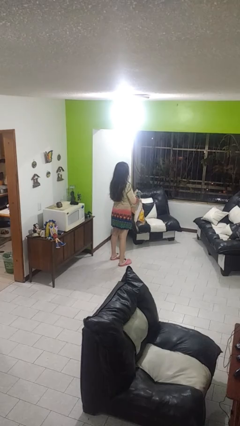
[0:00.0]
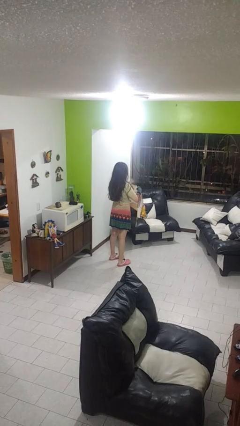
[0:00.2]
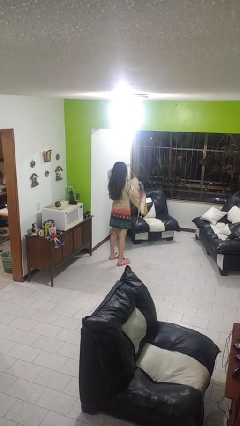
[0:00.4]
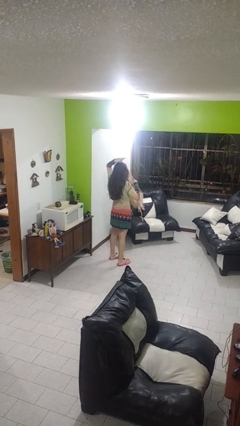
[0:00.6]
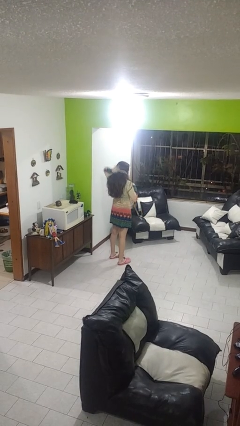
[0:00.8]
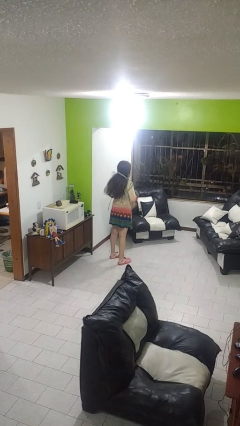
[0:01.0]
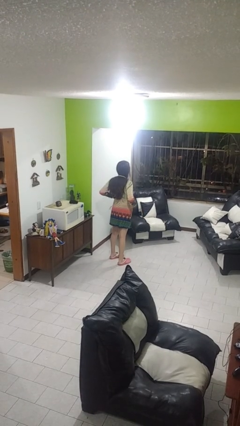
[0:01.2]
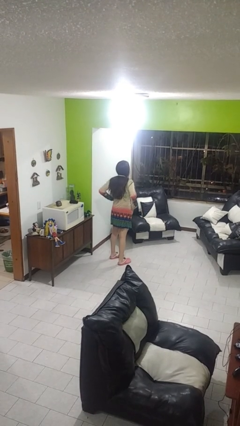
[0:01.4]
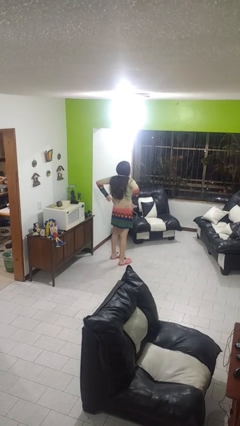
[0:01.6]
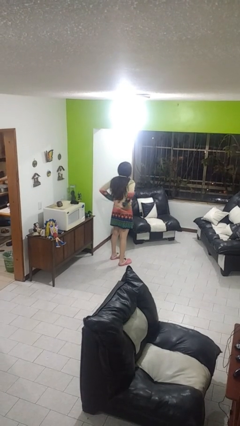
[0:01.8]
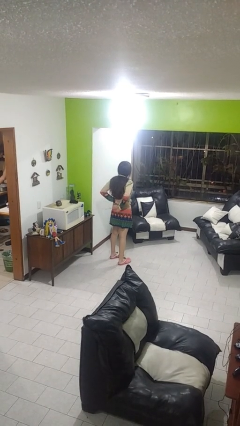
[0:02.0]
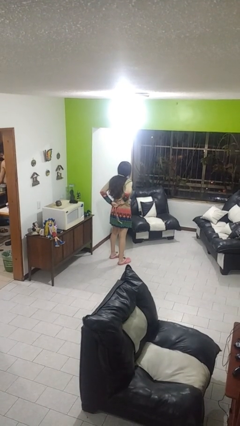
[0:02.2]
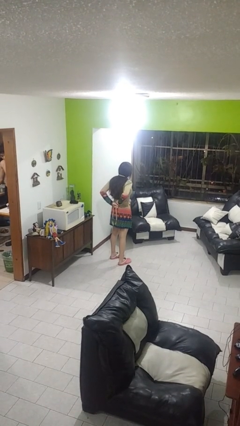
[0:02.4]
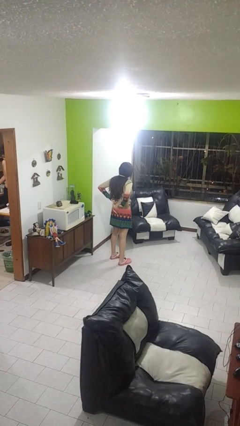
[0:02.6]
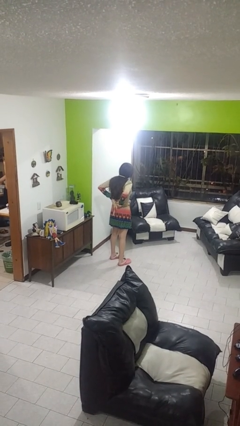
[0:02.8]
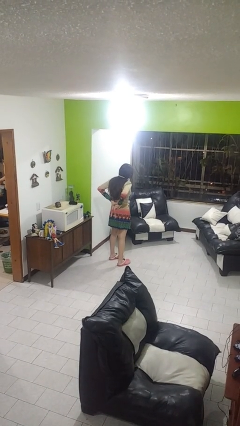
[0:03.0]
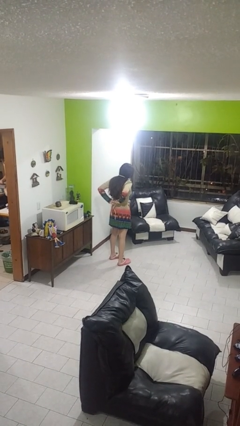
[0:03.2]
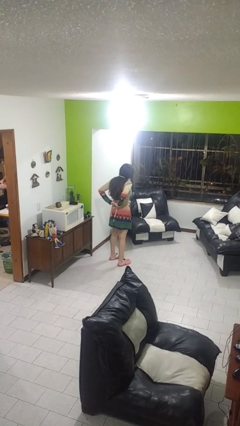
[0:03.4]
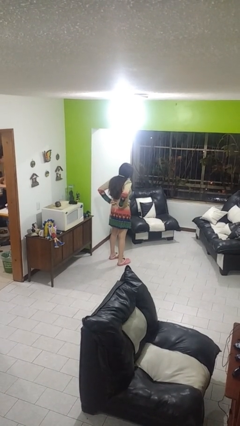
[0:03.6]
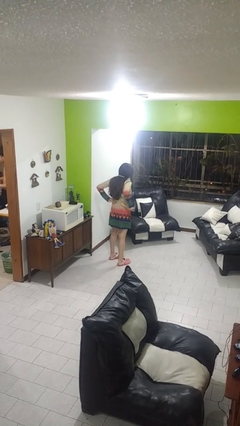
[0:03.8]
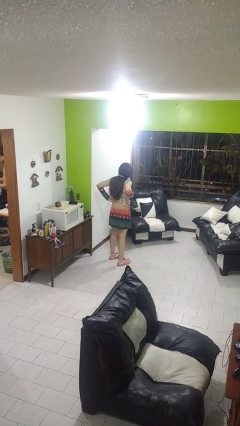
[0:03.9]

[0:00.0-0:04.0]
person puts on apron

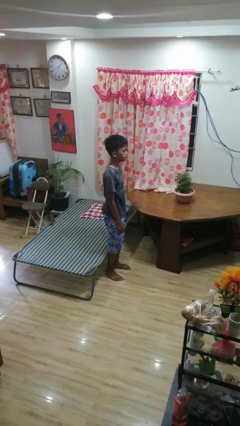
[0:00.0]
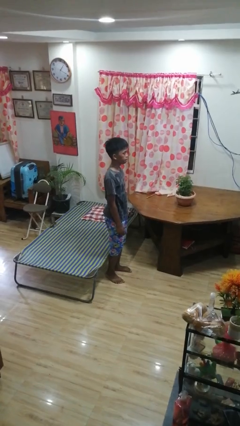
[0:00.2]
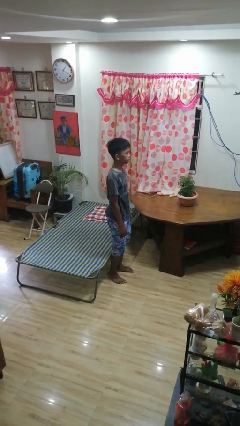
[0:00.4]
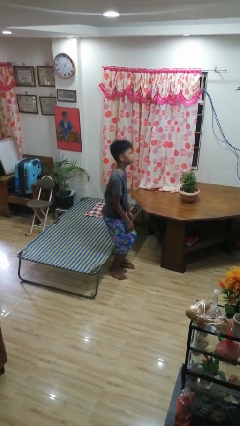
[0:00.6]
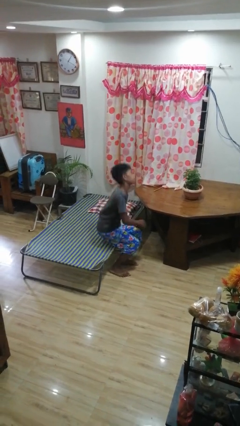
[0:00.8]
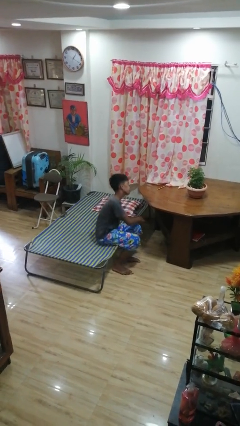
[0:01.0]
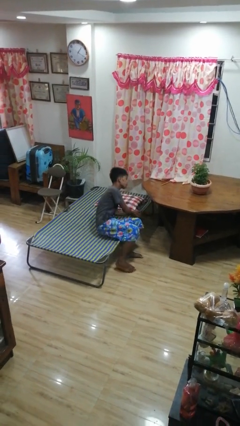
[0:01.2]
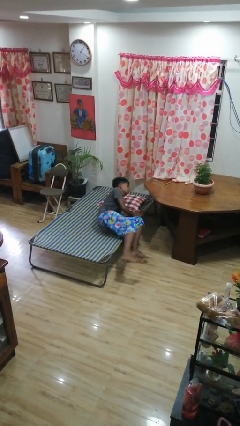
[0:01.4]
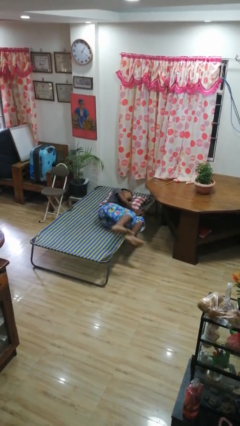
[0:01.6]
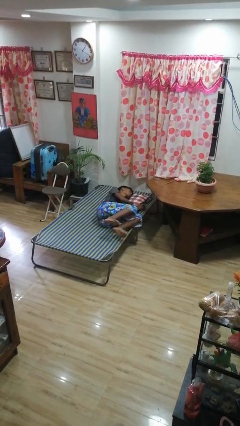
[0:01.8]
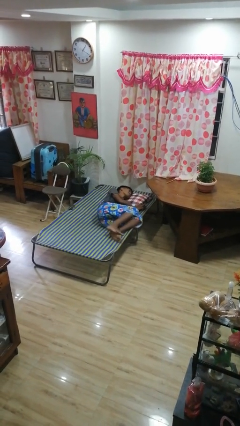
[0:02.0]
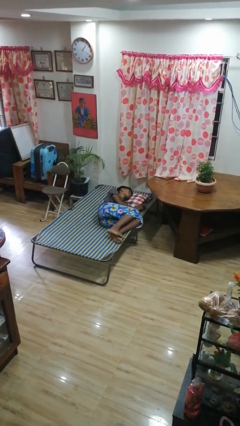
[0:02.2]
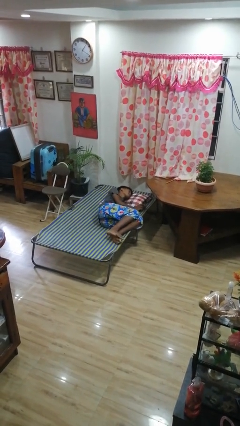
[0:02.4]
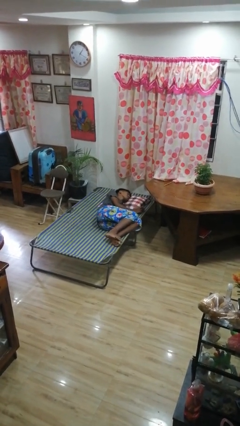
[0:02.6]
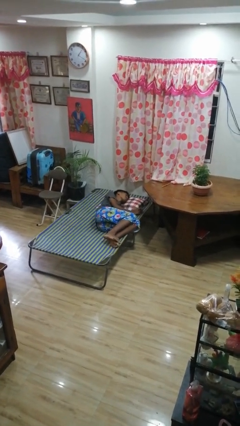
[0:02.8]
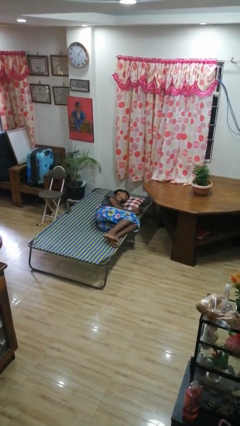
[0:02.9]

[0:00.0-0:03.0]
person lies down on bed

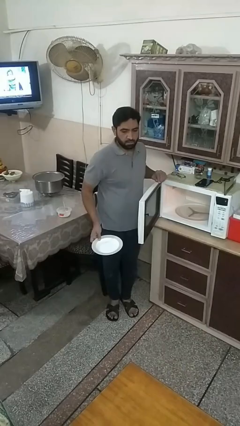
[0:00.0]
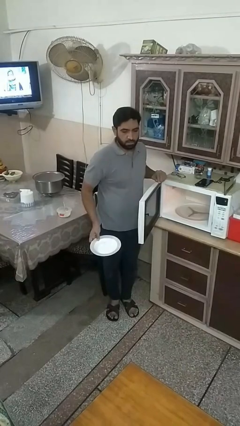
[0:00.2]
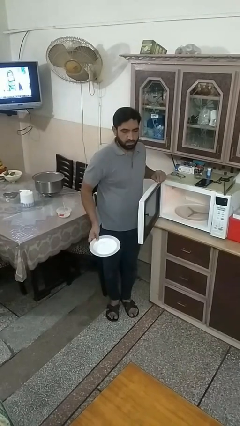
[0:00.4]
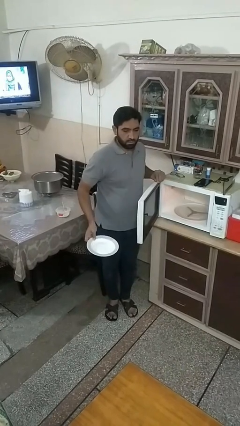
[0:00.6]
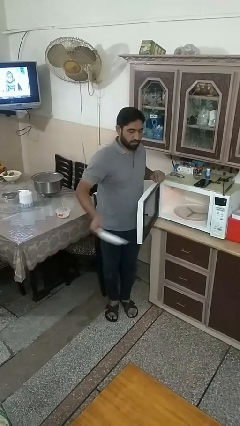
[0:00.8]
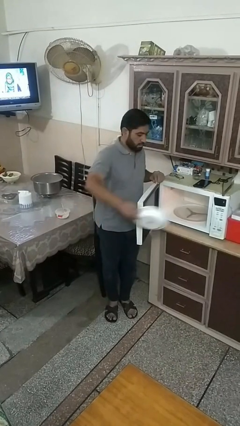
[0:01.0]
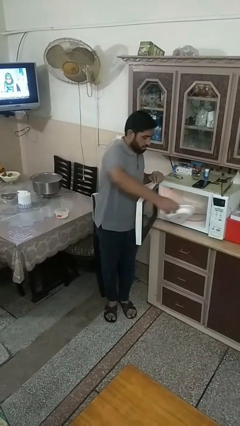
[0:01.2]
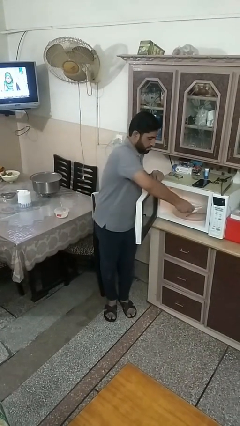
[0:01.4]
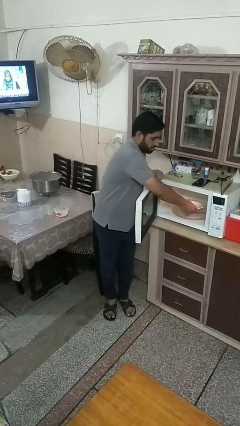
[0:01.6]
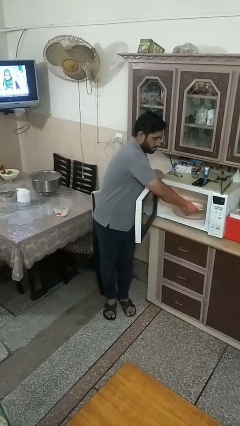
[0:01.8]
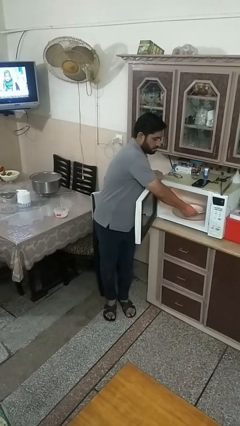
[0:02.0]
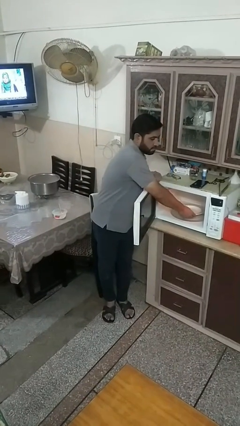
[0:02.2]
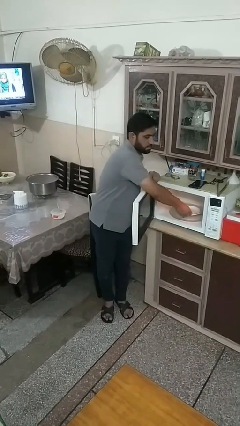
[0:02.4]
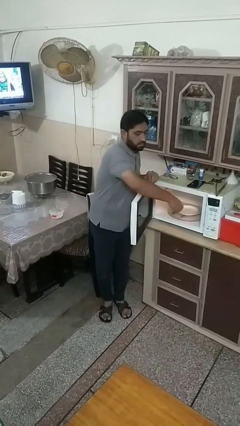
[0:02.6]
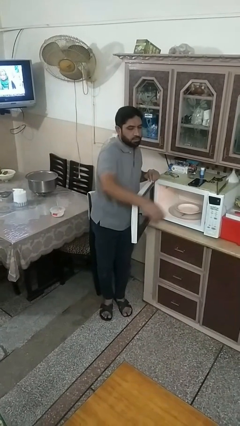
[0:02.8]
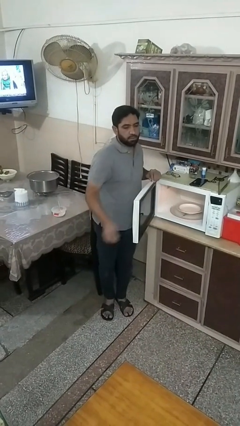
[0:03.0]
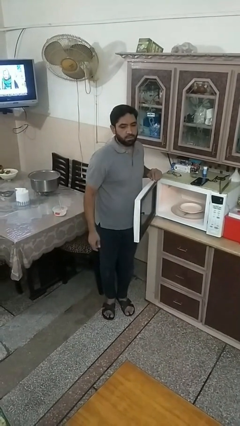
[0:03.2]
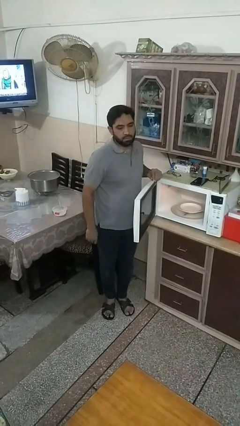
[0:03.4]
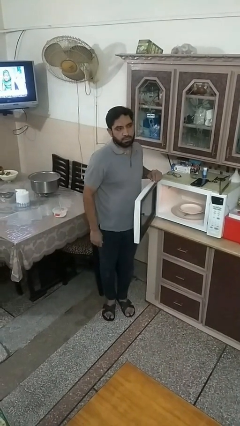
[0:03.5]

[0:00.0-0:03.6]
person puts object into microwave

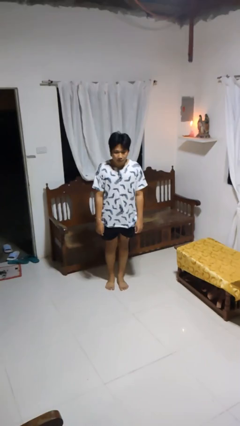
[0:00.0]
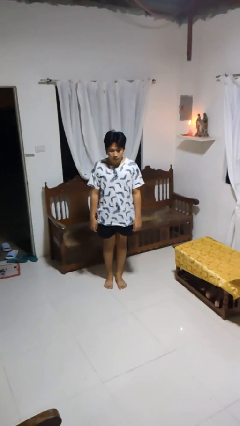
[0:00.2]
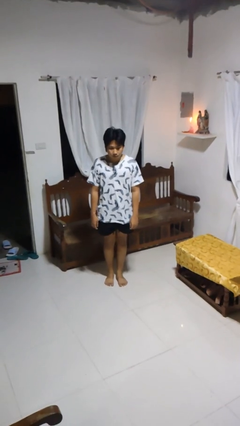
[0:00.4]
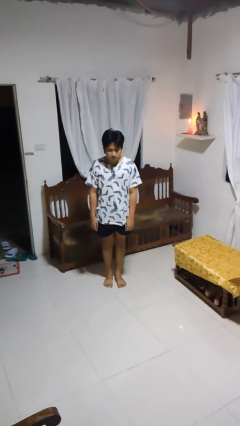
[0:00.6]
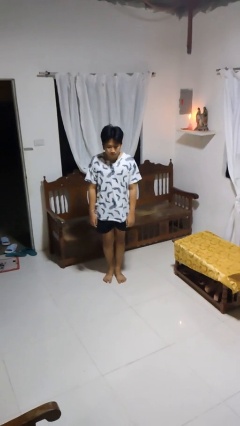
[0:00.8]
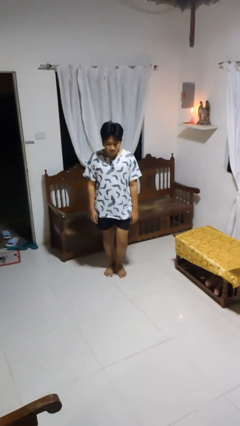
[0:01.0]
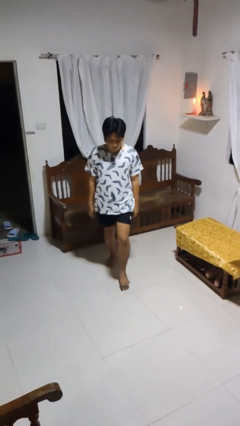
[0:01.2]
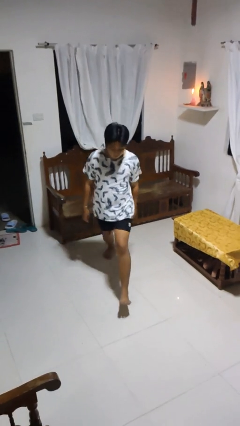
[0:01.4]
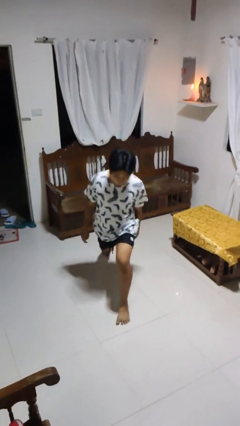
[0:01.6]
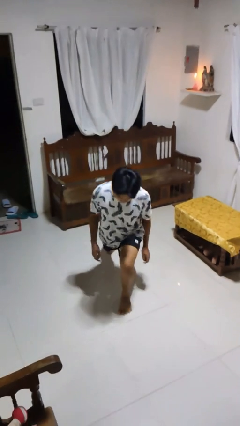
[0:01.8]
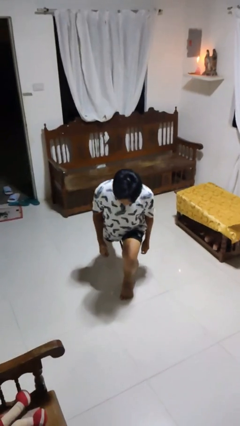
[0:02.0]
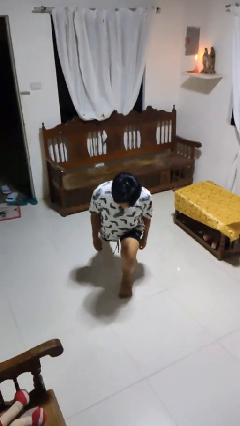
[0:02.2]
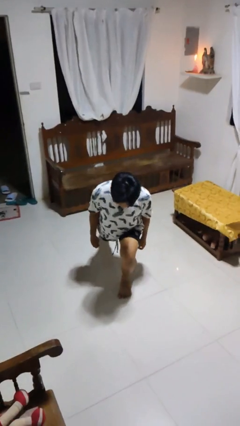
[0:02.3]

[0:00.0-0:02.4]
person exercises with lunges

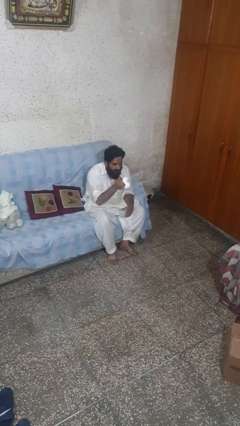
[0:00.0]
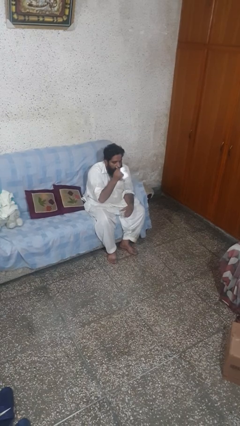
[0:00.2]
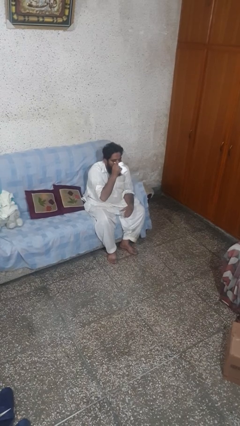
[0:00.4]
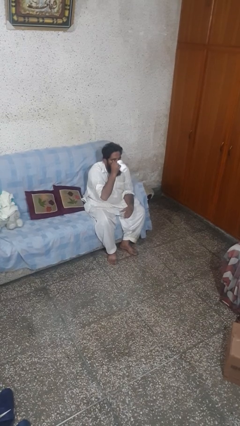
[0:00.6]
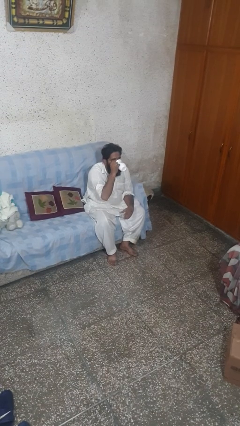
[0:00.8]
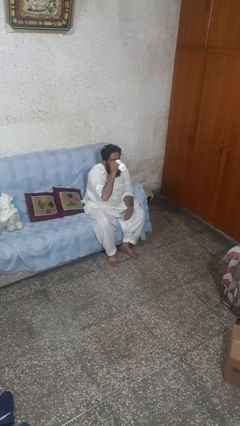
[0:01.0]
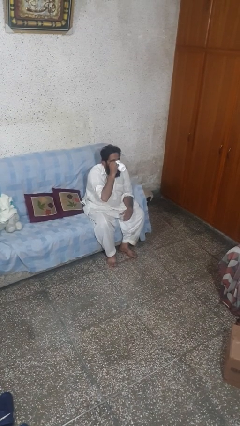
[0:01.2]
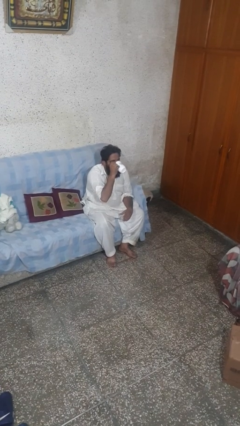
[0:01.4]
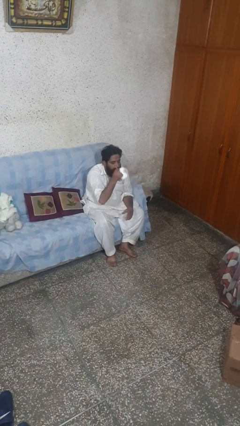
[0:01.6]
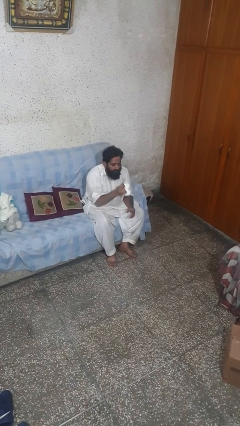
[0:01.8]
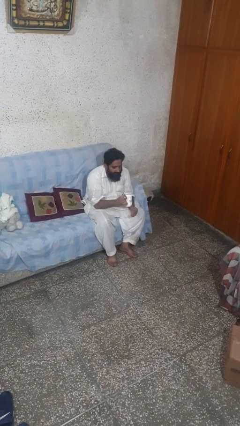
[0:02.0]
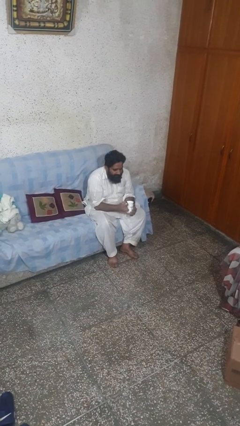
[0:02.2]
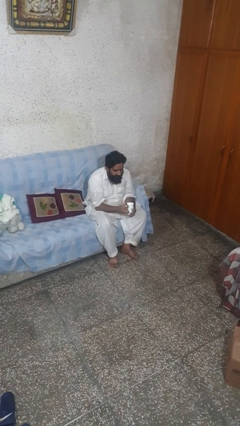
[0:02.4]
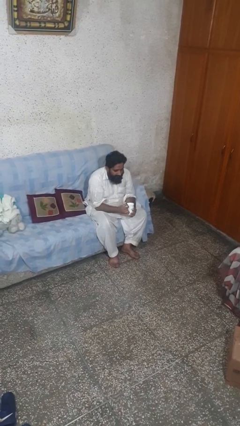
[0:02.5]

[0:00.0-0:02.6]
person drinks from mug

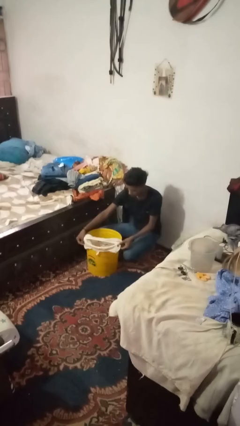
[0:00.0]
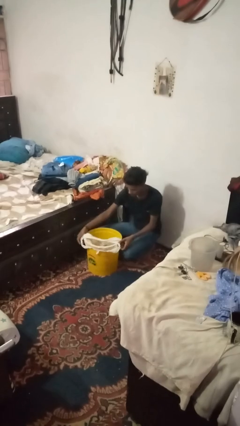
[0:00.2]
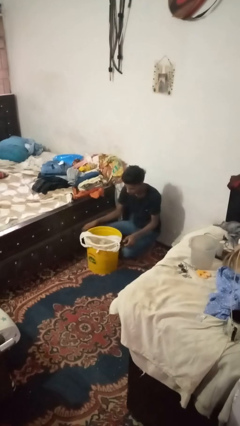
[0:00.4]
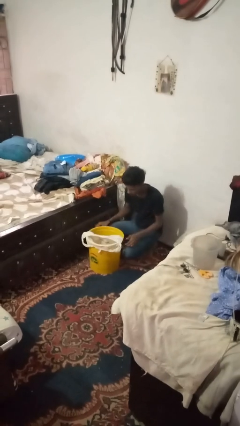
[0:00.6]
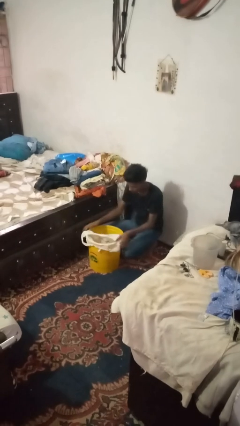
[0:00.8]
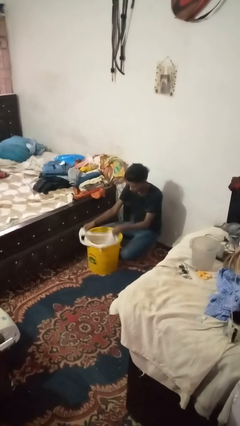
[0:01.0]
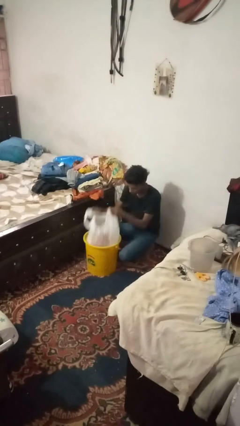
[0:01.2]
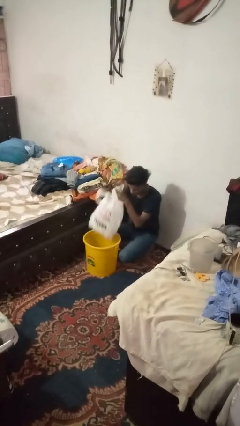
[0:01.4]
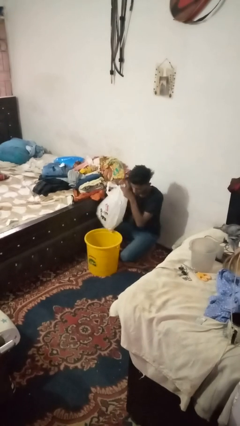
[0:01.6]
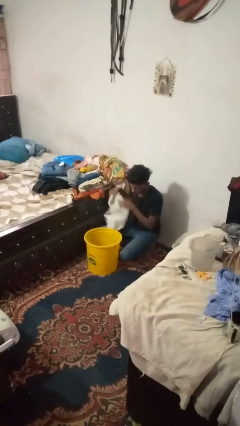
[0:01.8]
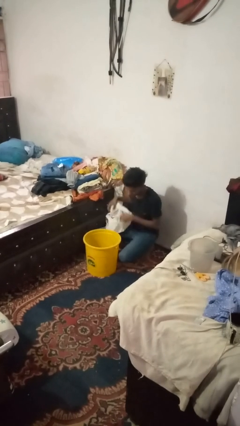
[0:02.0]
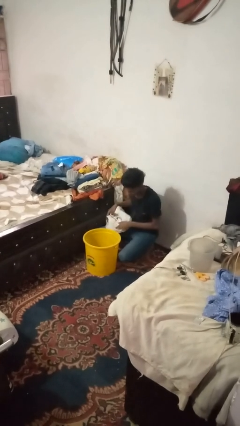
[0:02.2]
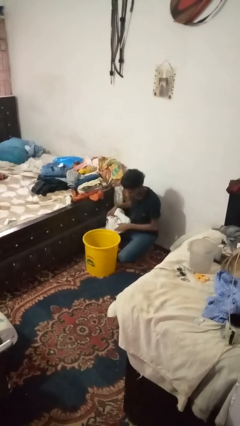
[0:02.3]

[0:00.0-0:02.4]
person removes trashbag from trashcan
